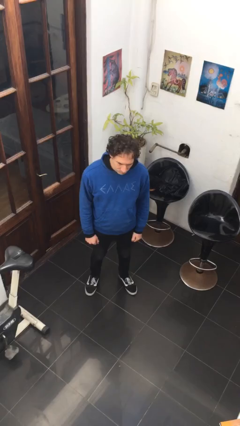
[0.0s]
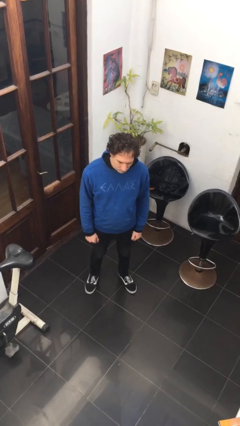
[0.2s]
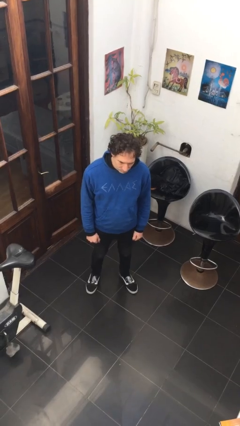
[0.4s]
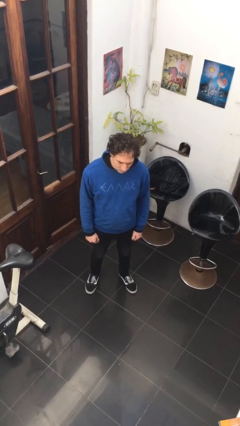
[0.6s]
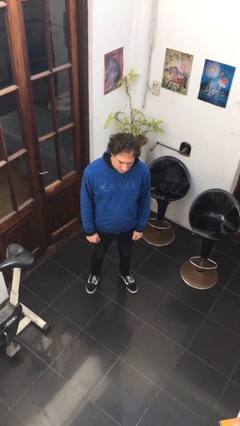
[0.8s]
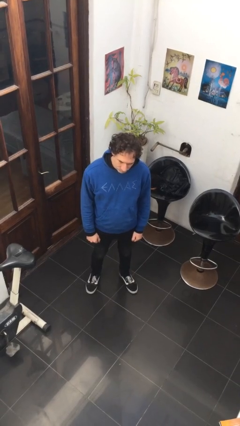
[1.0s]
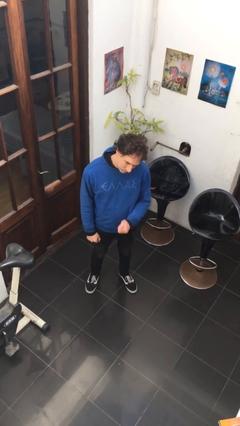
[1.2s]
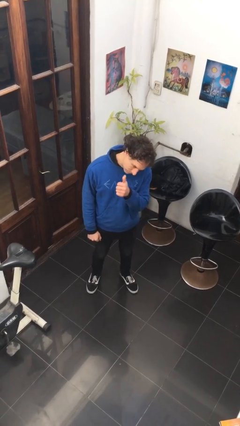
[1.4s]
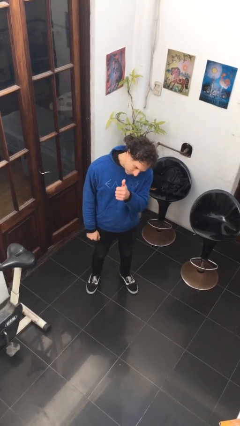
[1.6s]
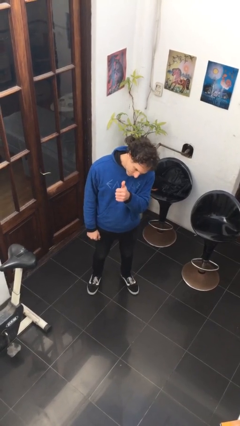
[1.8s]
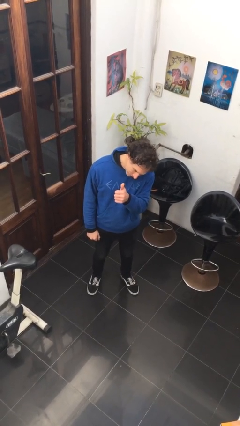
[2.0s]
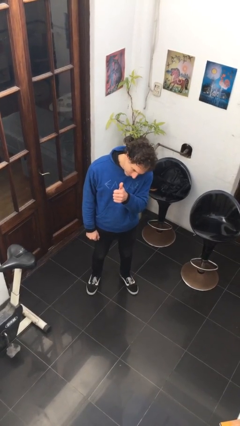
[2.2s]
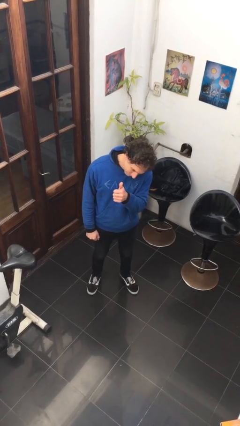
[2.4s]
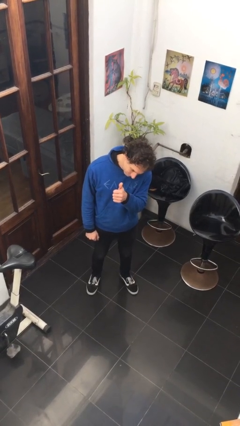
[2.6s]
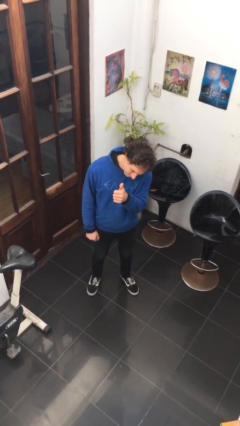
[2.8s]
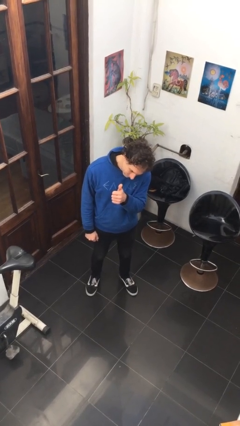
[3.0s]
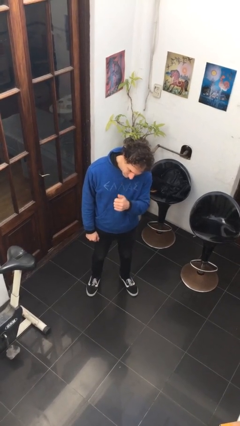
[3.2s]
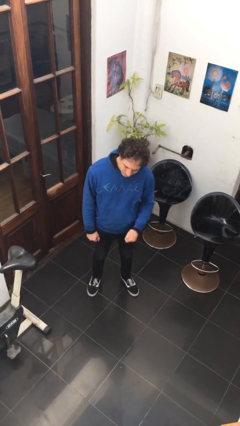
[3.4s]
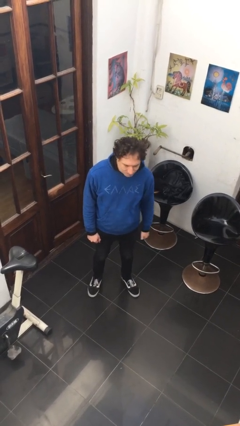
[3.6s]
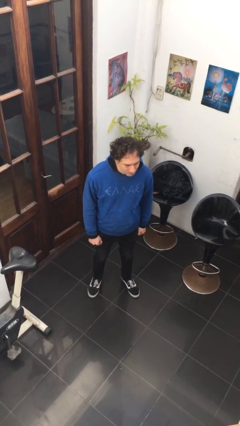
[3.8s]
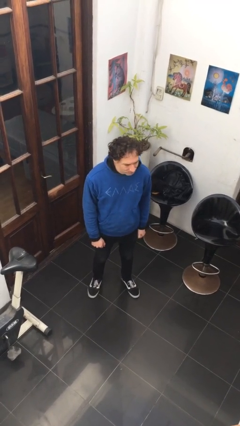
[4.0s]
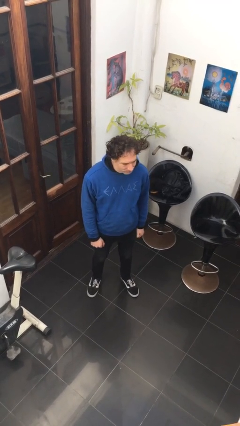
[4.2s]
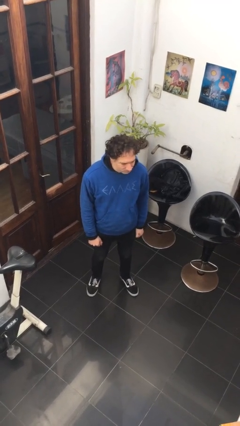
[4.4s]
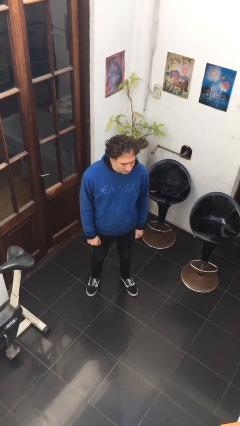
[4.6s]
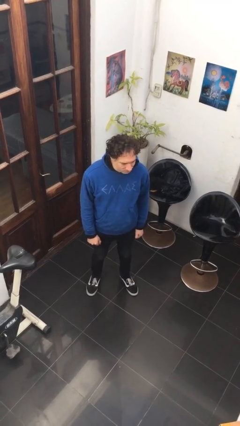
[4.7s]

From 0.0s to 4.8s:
person gestures thumbs up

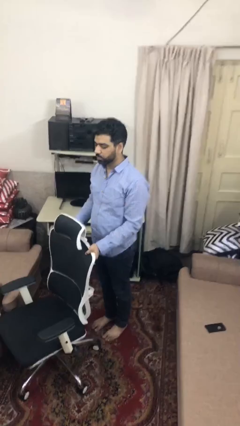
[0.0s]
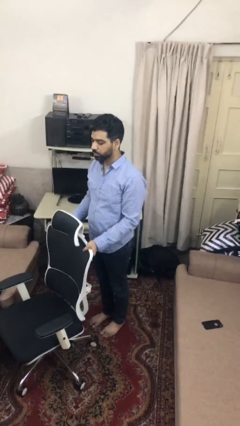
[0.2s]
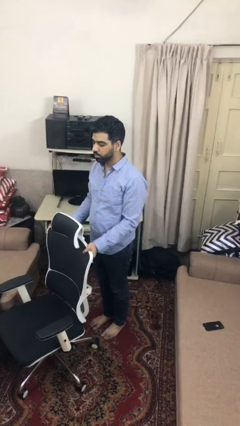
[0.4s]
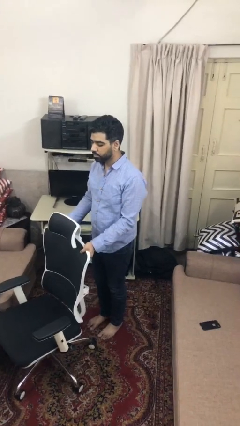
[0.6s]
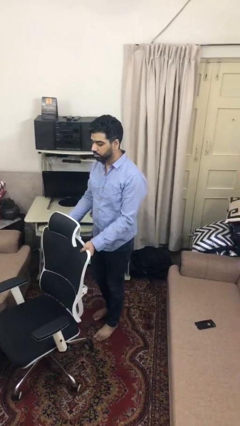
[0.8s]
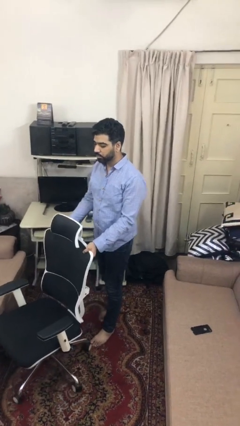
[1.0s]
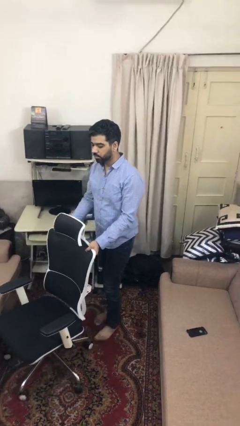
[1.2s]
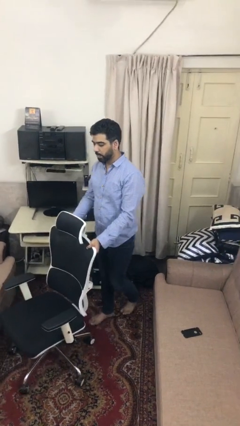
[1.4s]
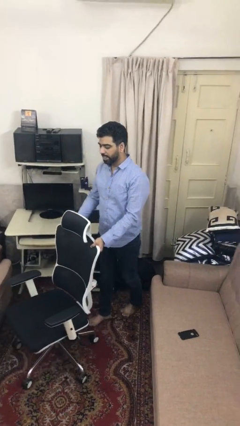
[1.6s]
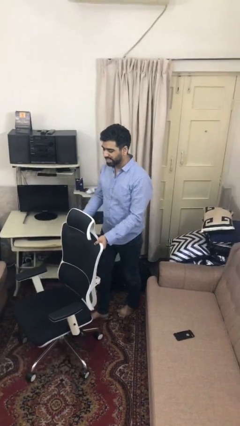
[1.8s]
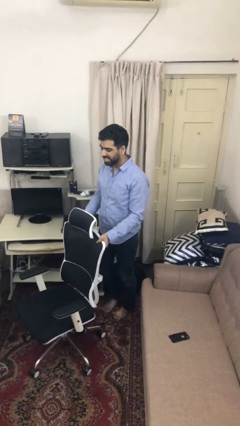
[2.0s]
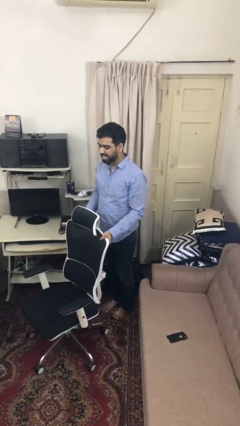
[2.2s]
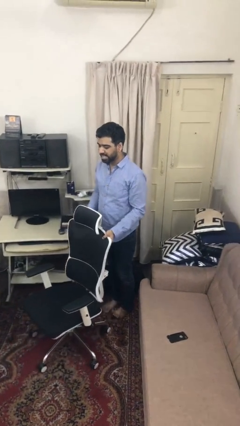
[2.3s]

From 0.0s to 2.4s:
person pulls wheeled cart

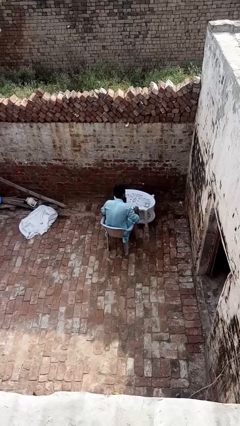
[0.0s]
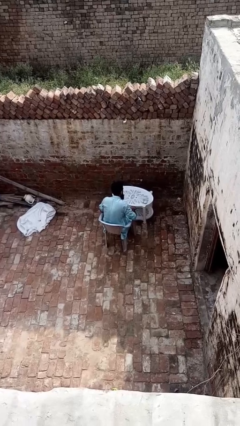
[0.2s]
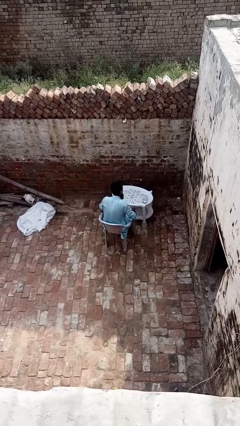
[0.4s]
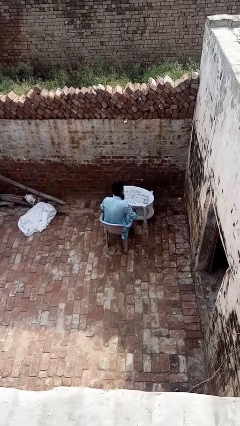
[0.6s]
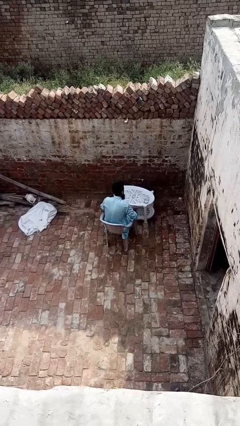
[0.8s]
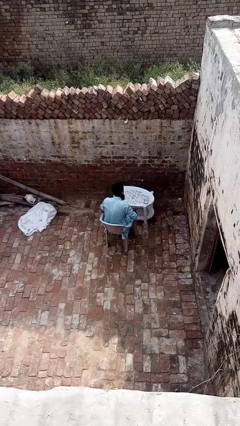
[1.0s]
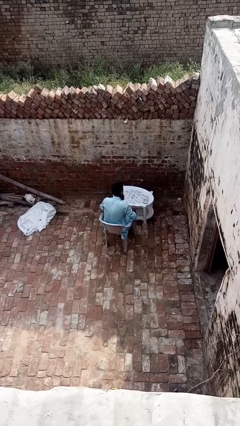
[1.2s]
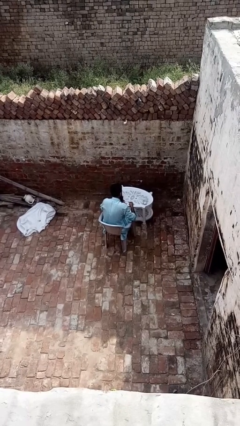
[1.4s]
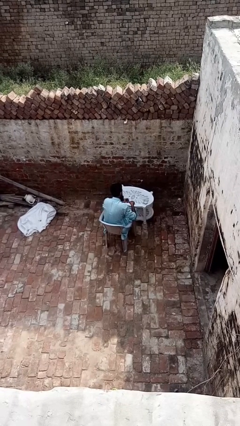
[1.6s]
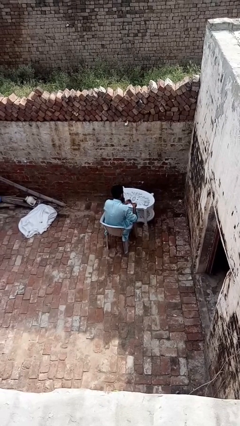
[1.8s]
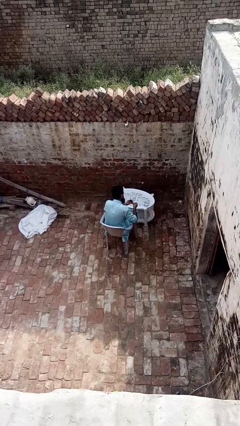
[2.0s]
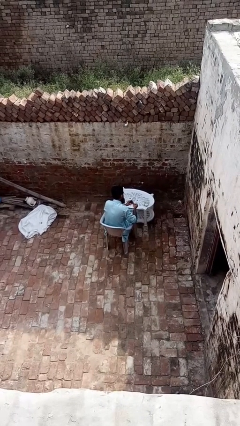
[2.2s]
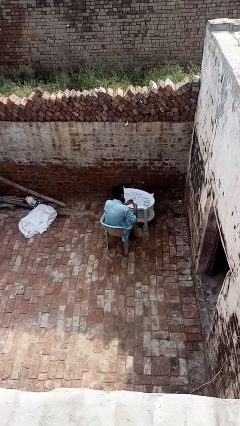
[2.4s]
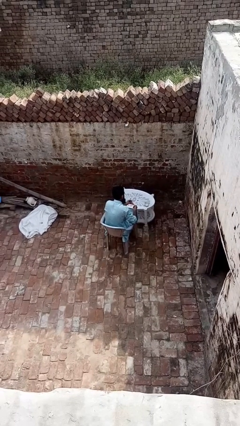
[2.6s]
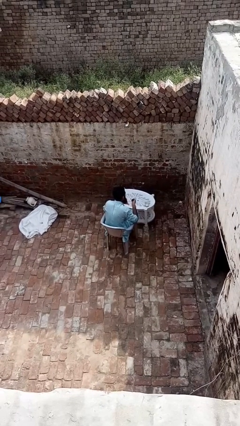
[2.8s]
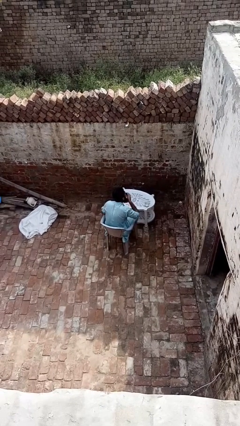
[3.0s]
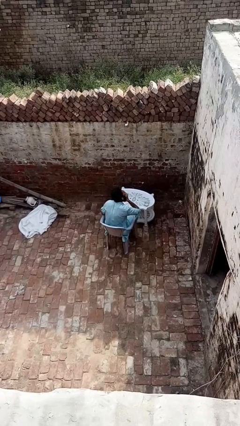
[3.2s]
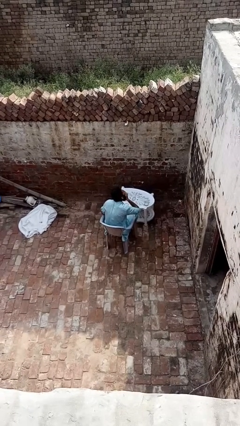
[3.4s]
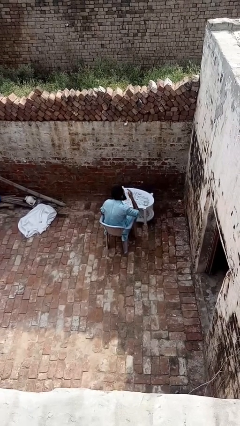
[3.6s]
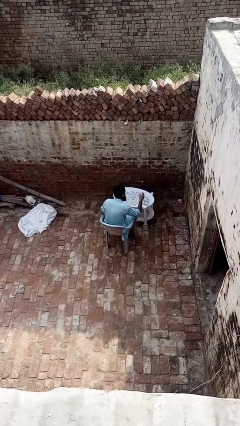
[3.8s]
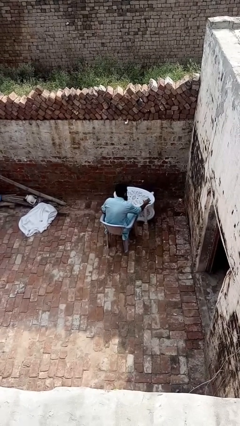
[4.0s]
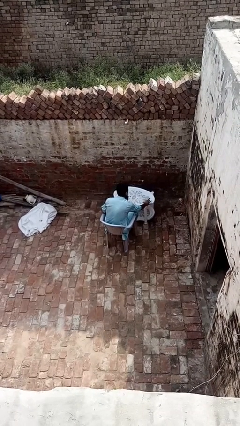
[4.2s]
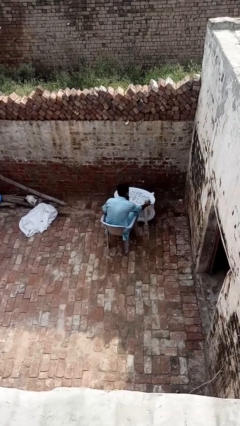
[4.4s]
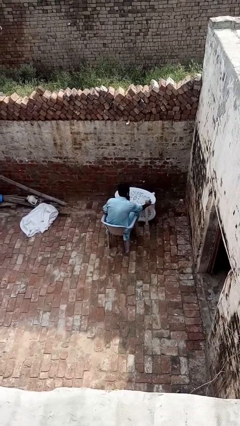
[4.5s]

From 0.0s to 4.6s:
person takes medicine pills

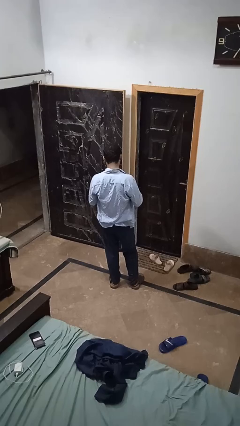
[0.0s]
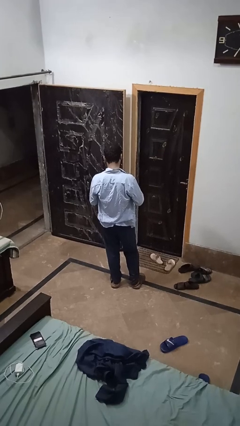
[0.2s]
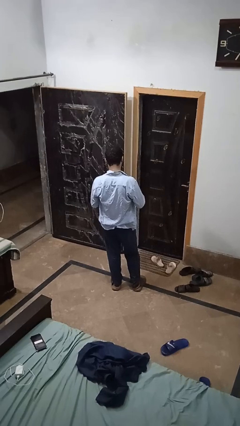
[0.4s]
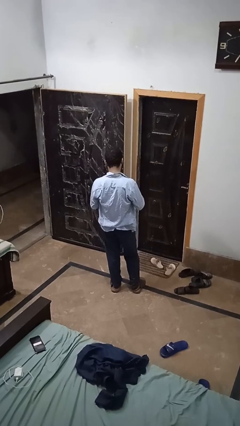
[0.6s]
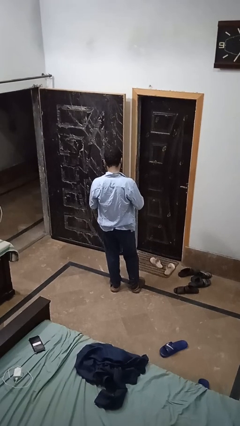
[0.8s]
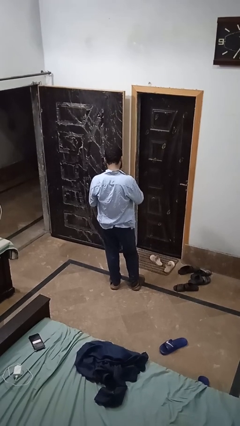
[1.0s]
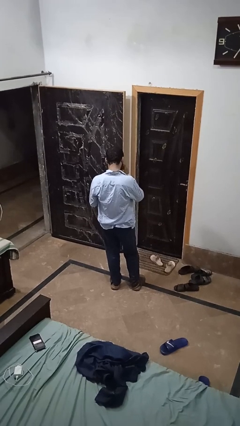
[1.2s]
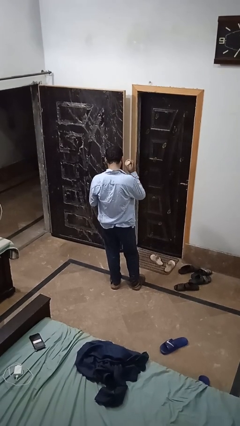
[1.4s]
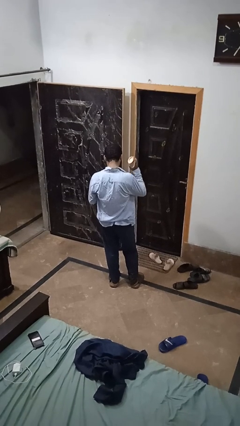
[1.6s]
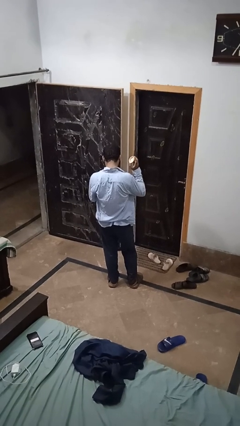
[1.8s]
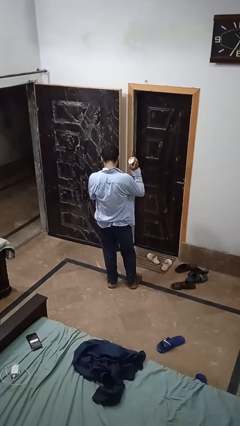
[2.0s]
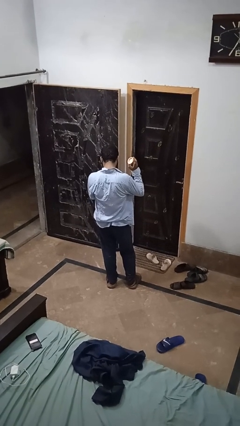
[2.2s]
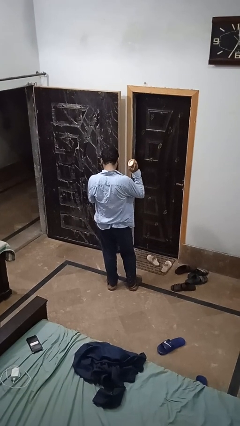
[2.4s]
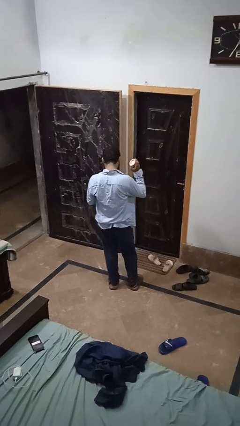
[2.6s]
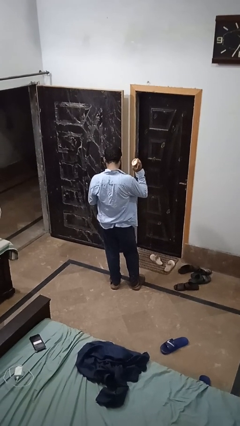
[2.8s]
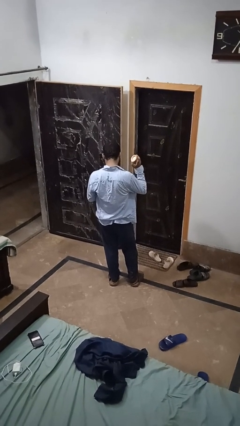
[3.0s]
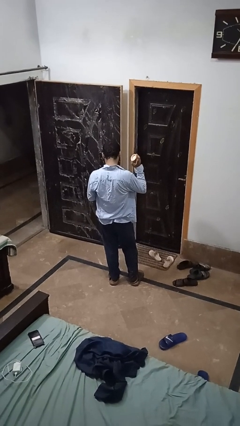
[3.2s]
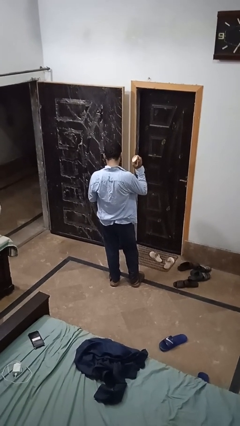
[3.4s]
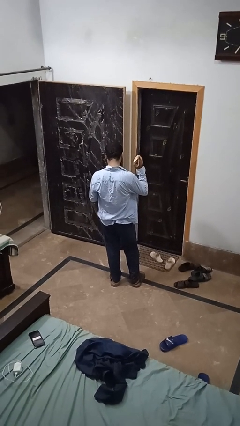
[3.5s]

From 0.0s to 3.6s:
person opens jar

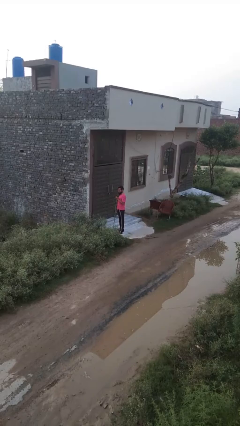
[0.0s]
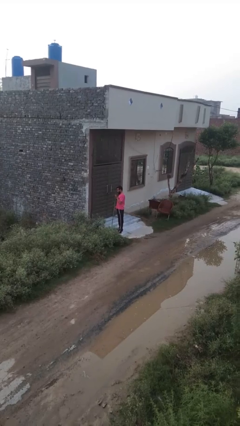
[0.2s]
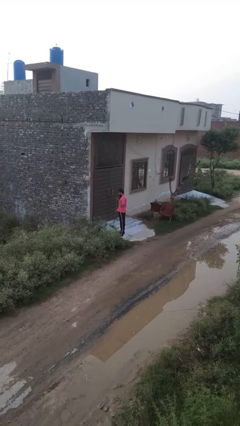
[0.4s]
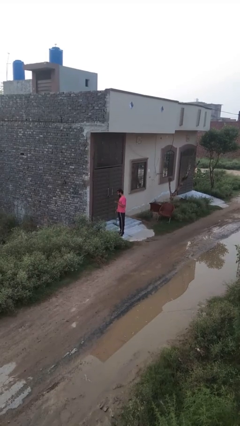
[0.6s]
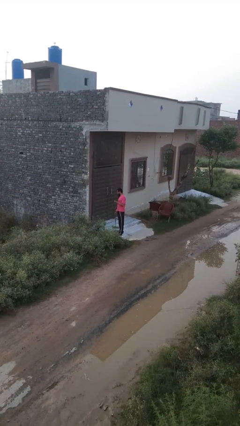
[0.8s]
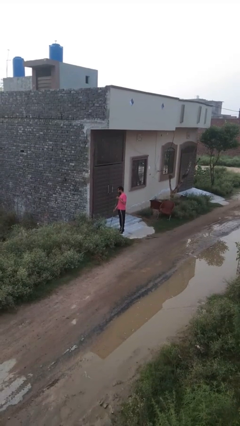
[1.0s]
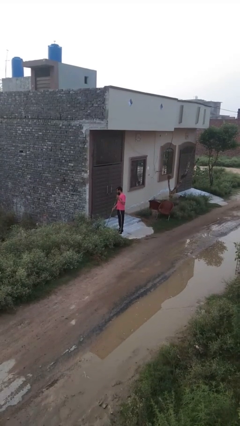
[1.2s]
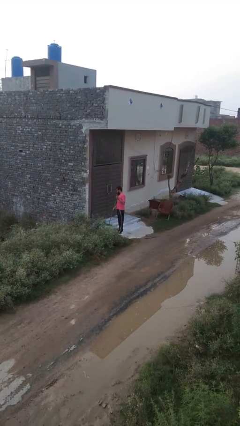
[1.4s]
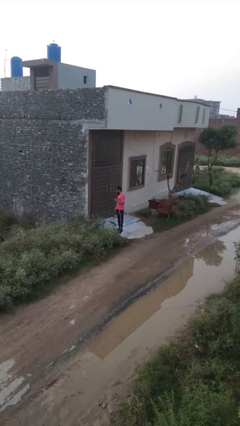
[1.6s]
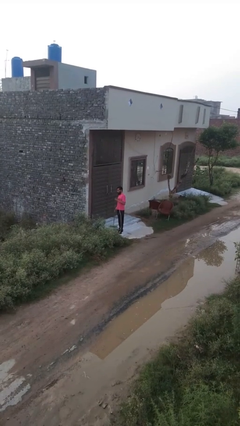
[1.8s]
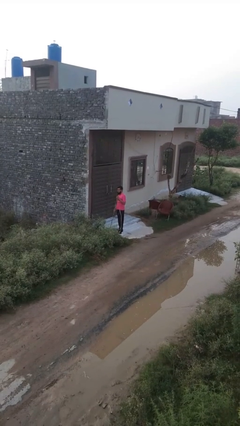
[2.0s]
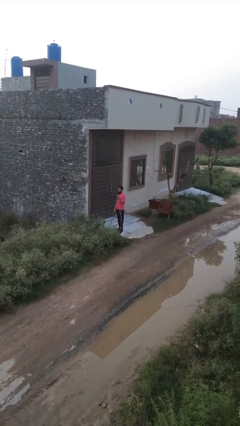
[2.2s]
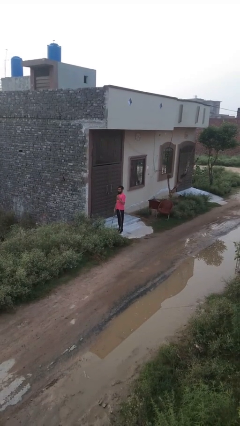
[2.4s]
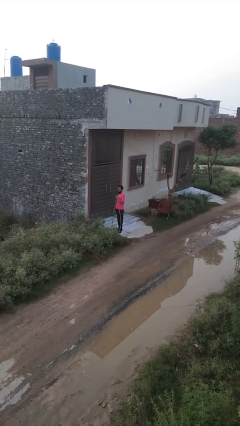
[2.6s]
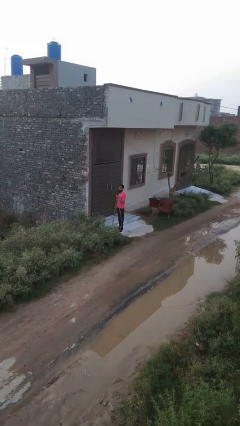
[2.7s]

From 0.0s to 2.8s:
person sweeps floor
